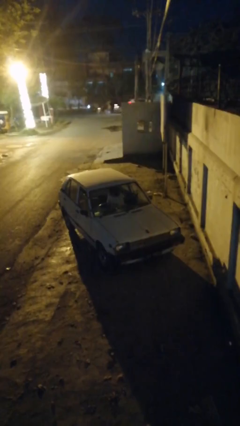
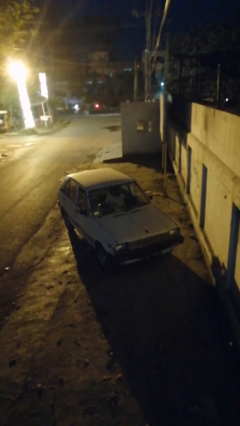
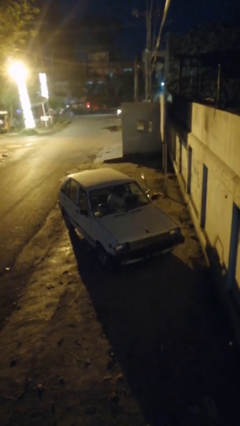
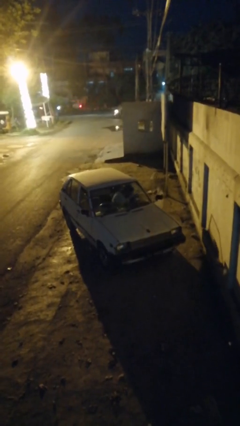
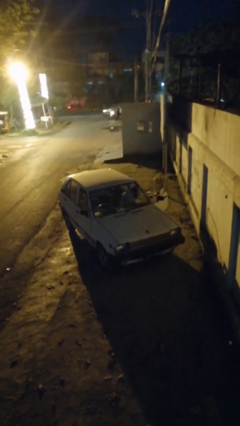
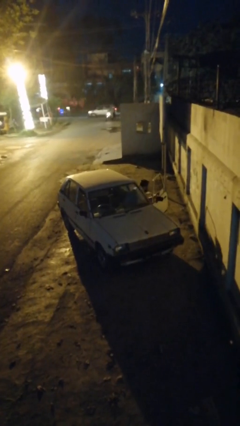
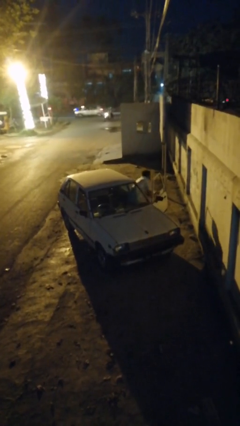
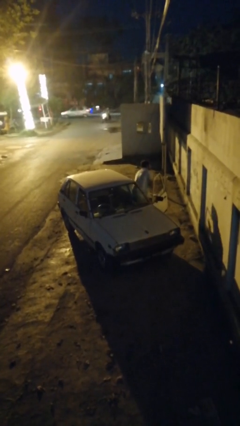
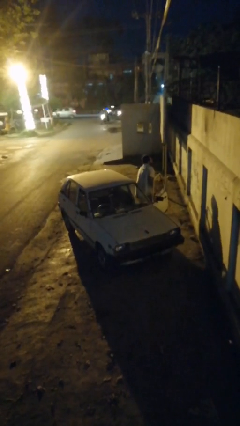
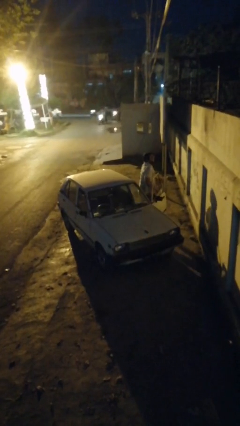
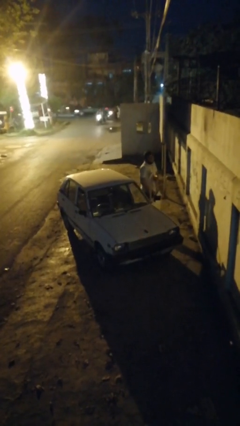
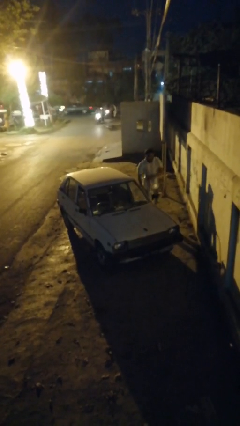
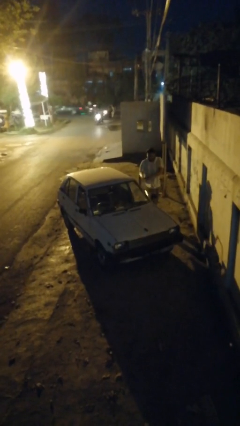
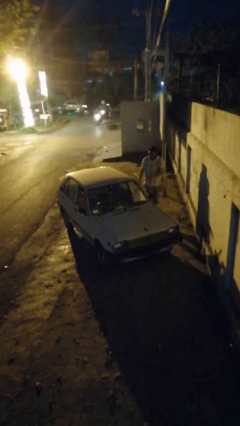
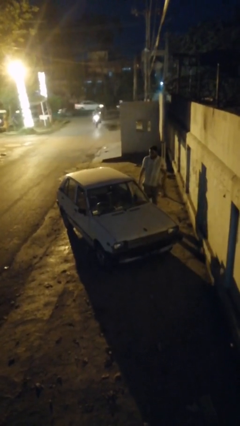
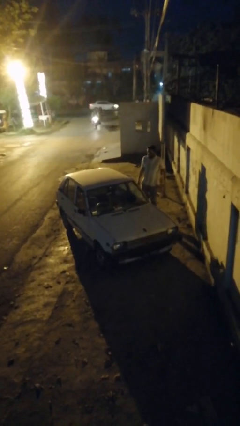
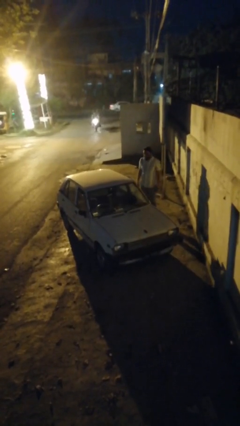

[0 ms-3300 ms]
car drops off person

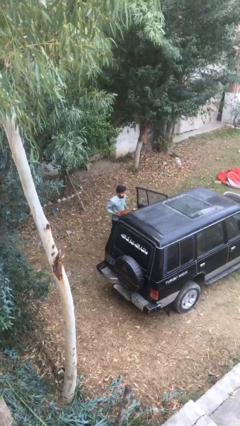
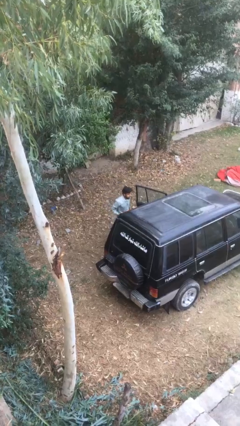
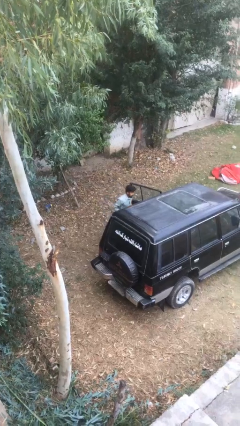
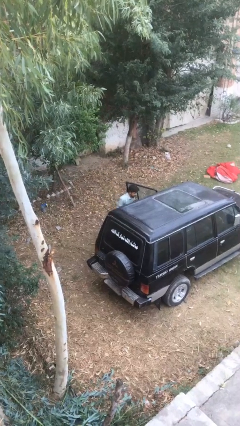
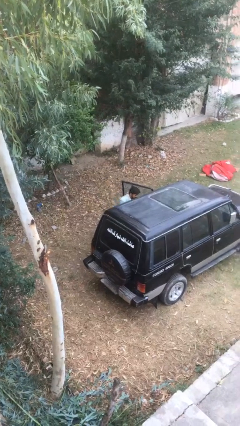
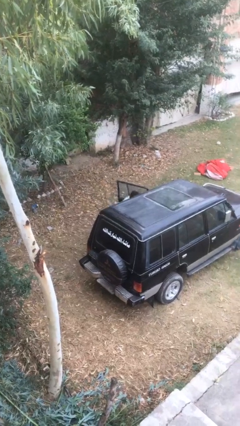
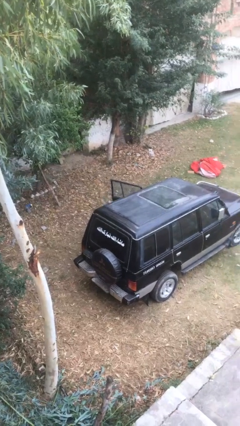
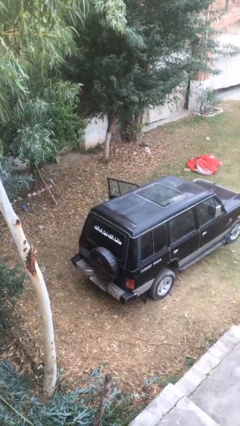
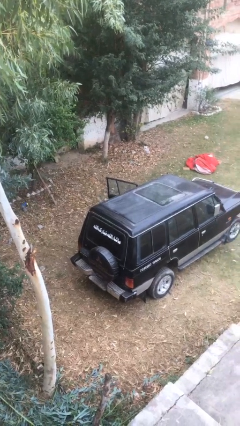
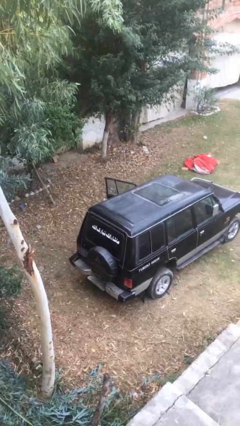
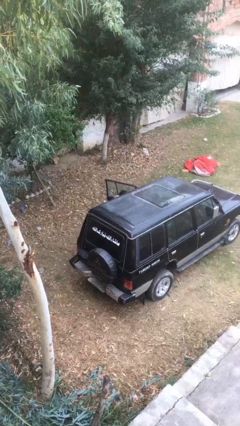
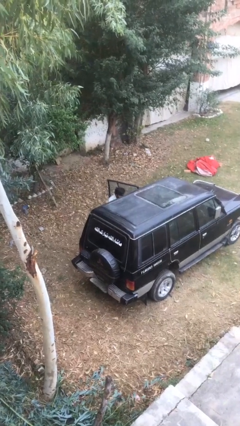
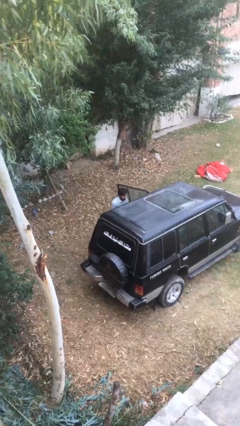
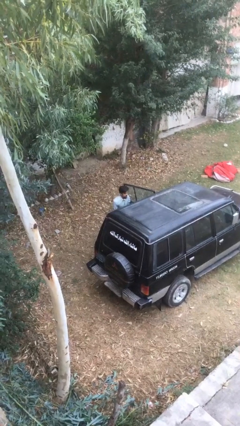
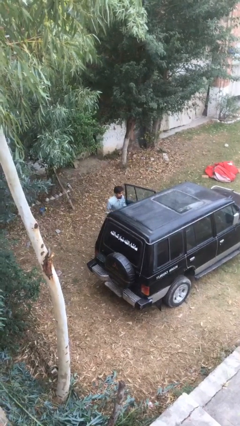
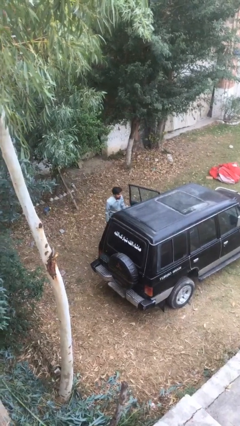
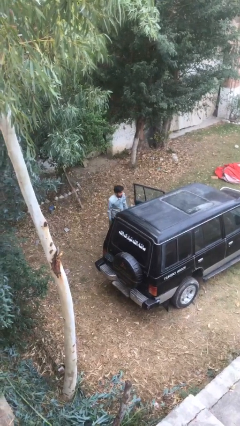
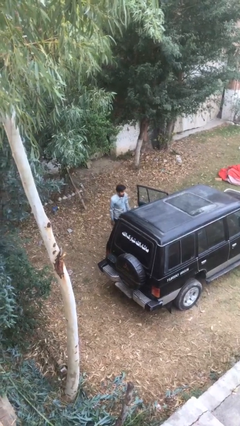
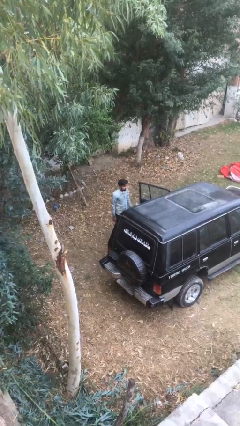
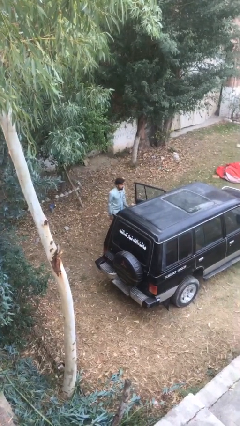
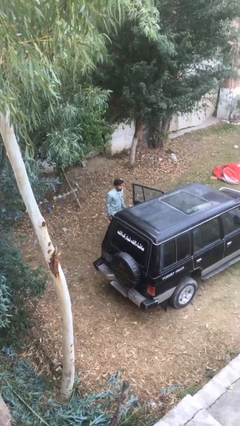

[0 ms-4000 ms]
person loads car

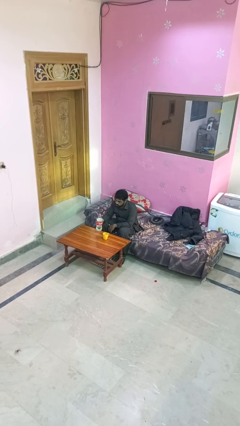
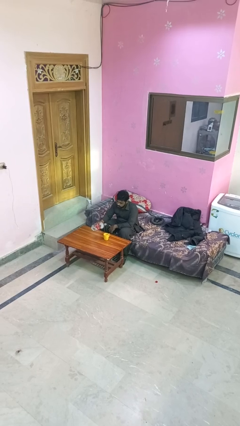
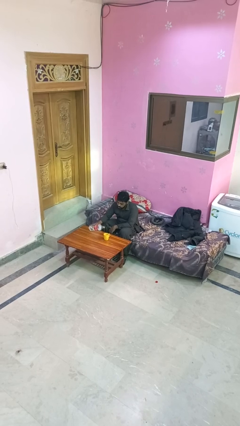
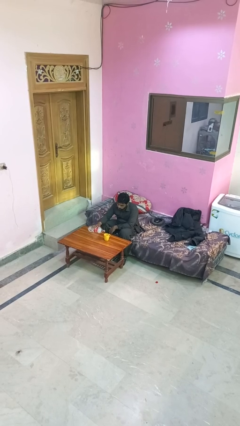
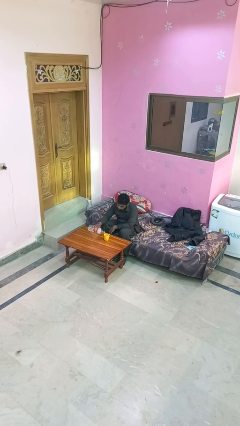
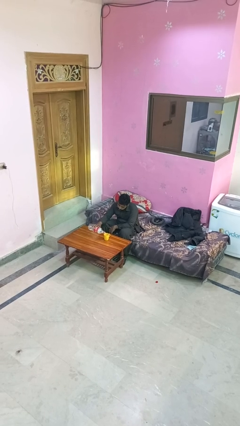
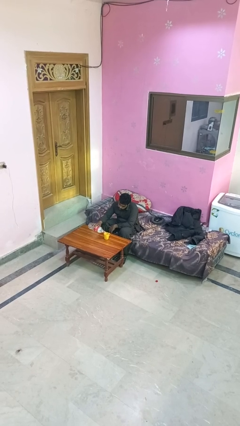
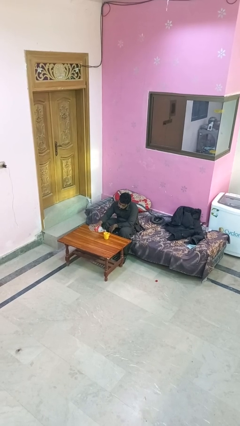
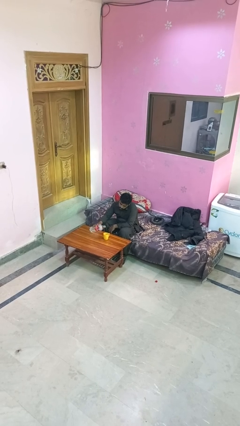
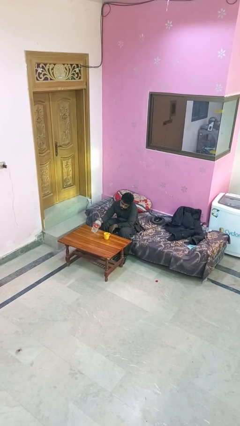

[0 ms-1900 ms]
person pours liquid into cup

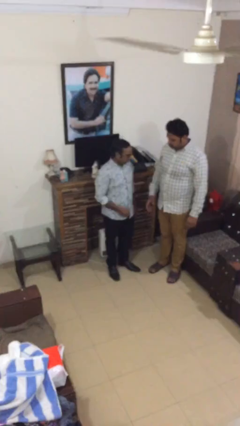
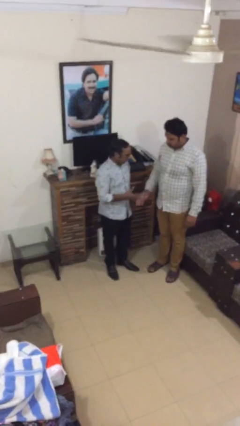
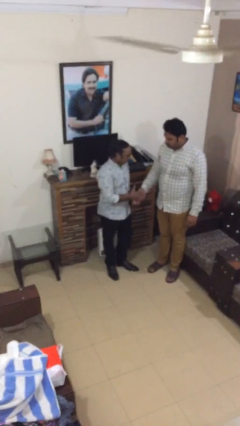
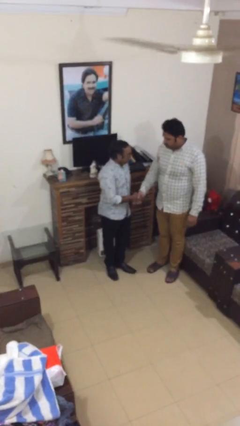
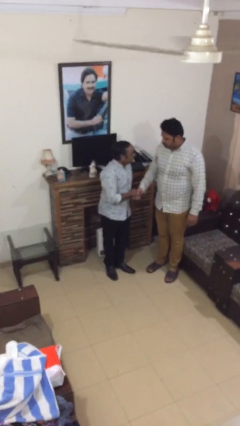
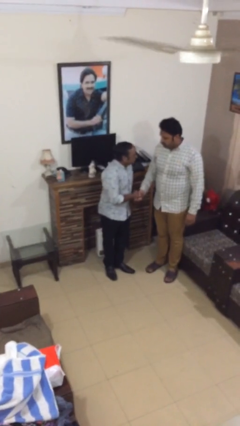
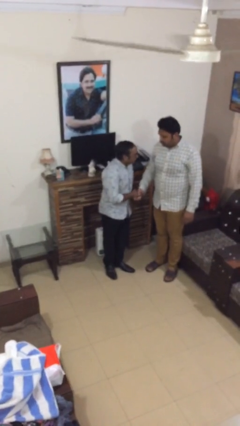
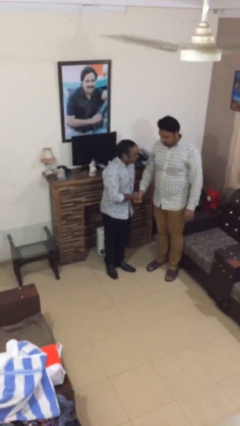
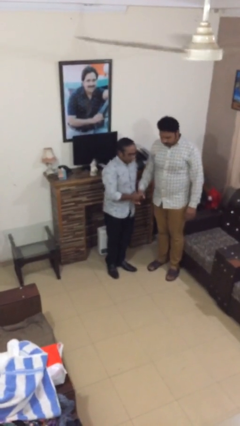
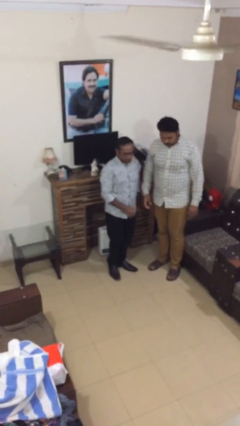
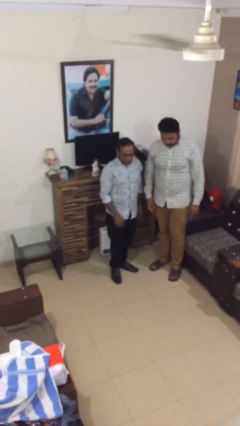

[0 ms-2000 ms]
person shakes hand

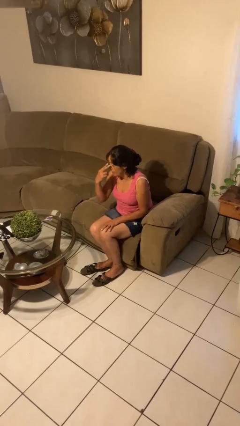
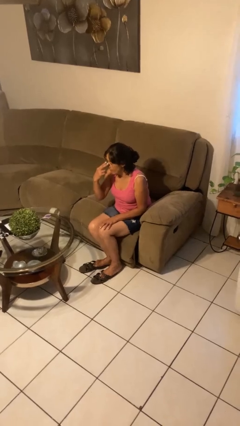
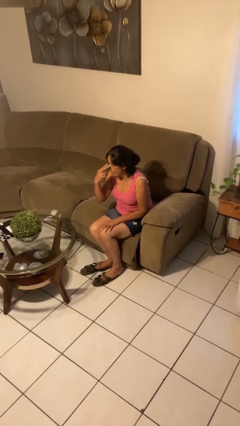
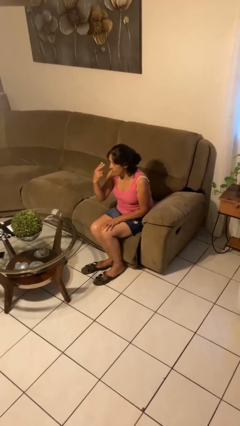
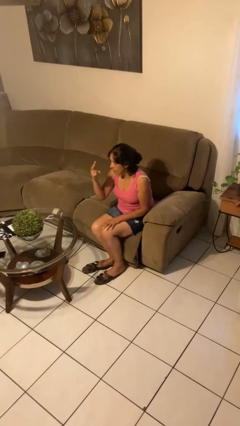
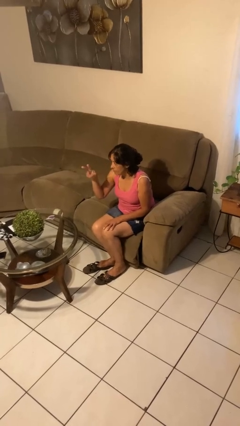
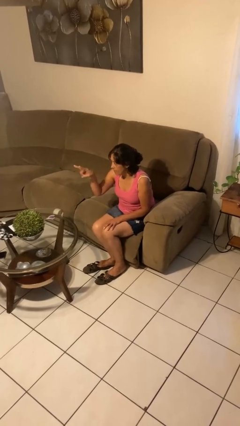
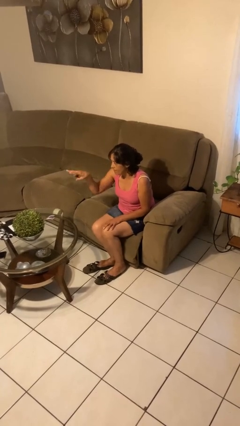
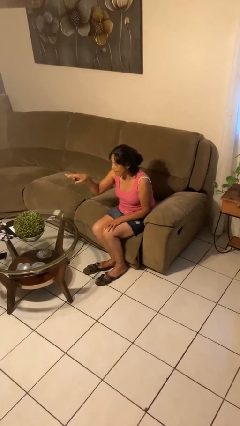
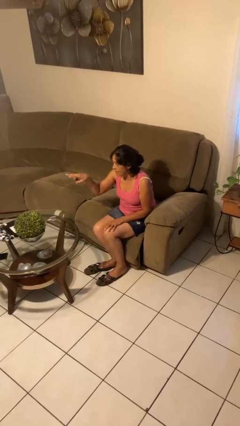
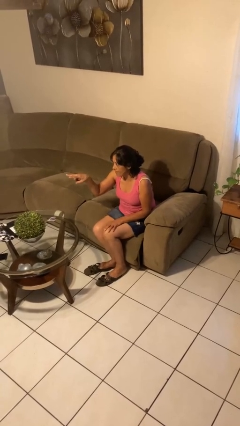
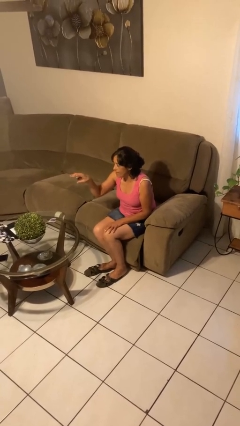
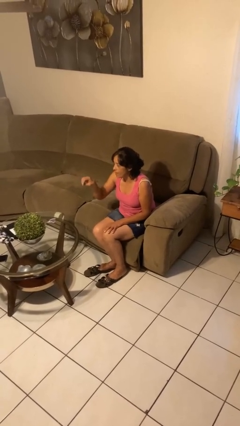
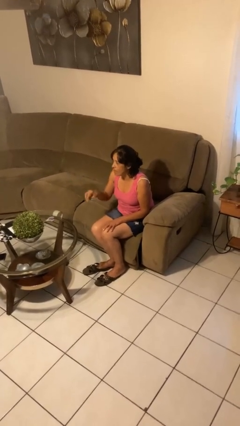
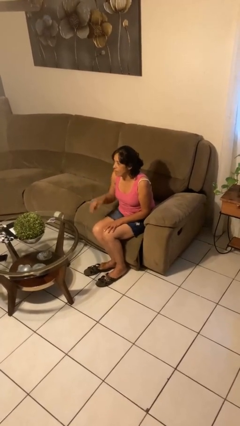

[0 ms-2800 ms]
person gestures watch closely

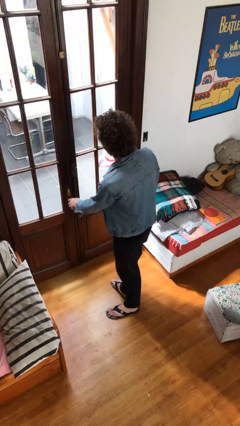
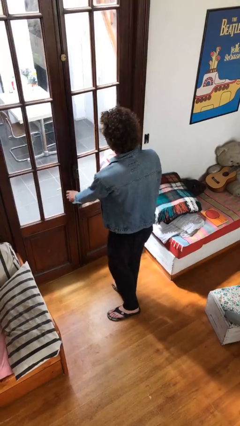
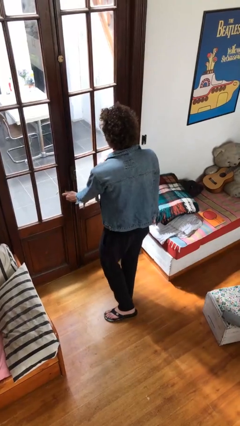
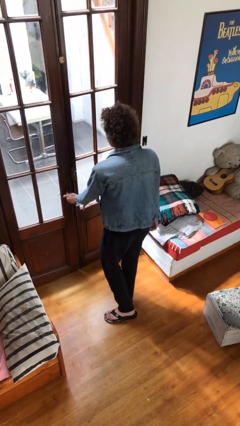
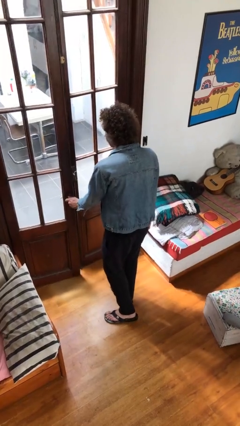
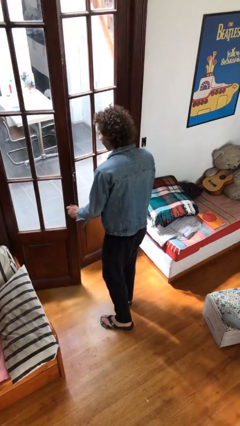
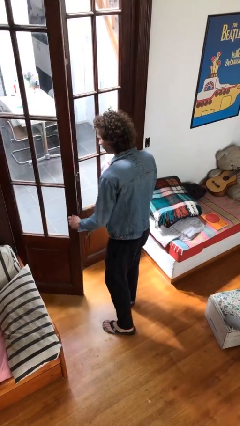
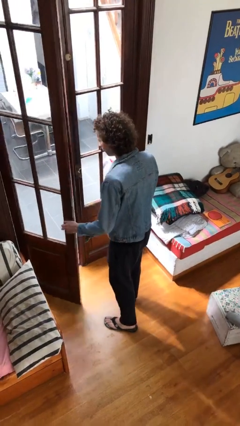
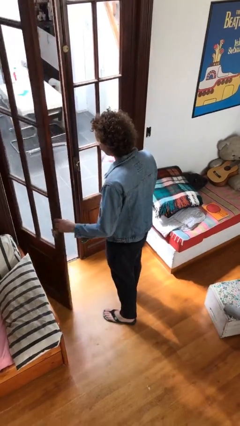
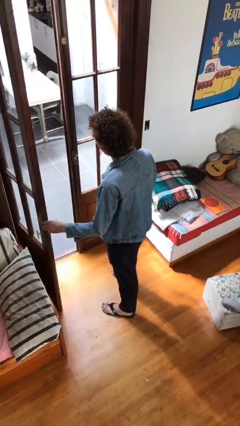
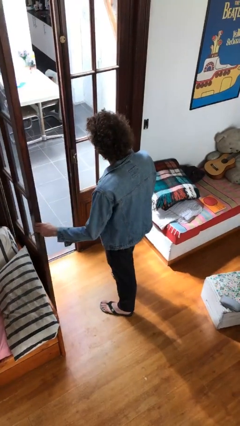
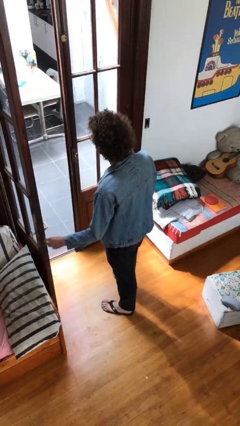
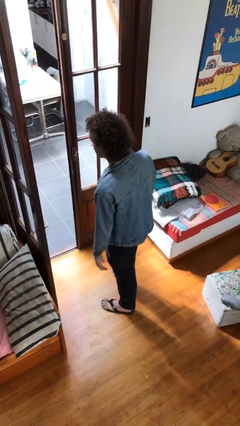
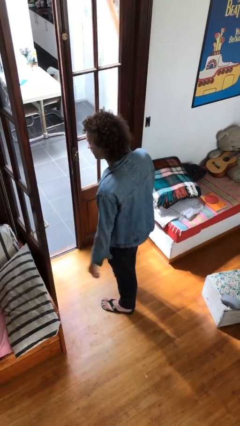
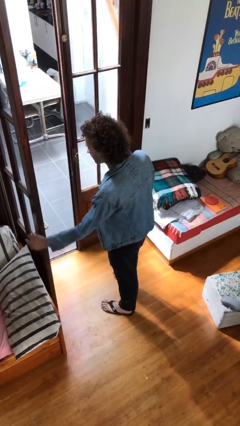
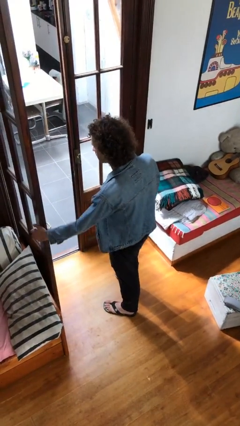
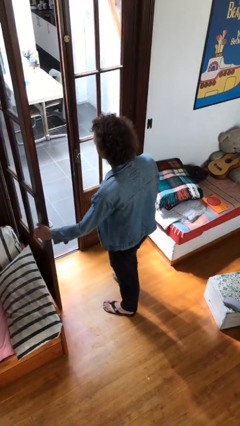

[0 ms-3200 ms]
person opens facility door

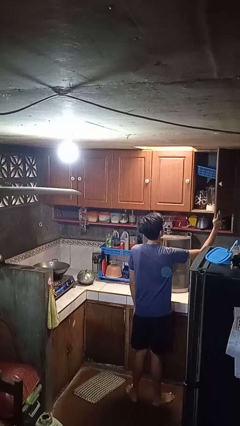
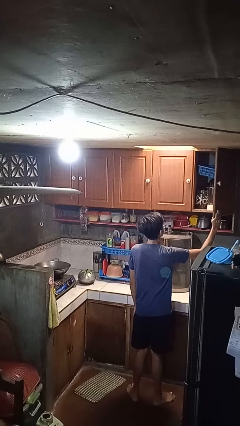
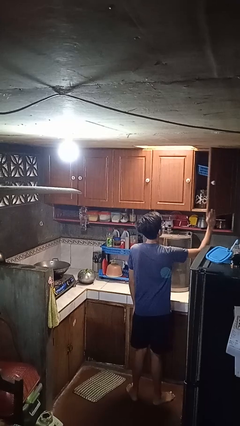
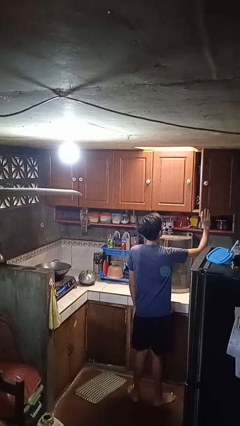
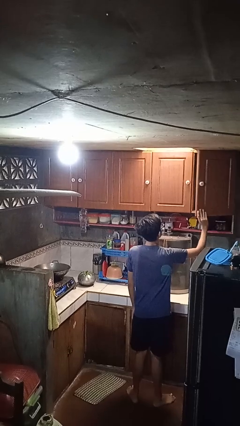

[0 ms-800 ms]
person closes cabinet
